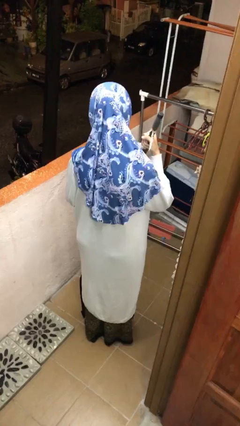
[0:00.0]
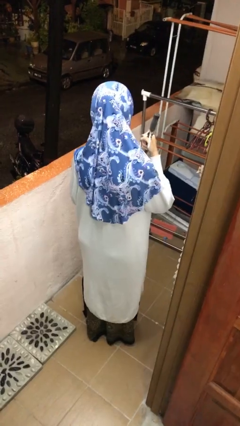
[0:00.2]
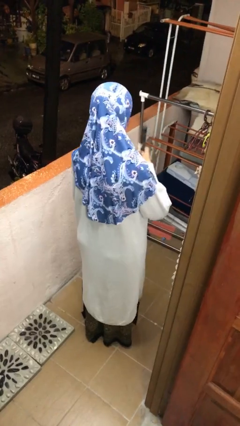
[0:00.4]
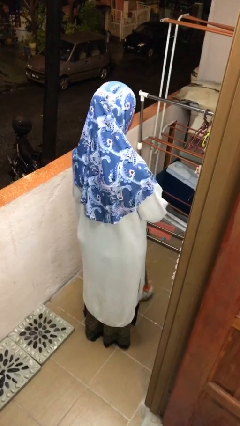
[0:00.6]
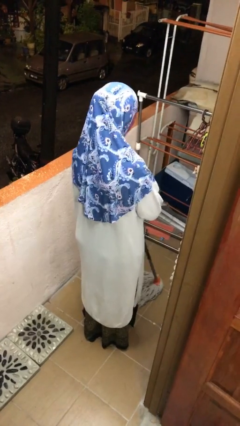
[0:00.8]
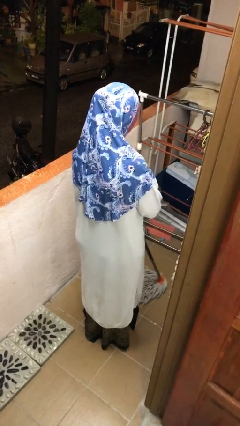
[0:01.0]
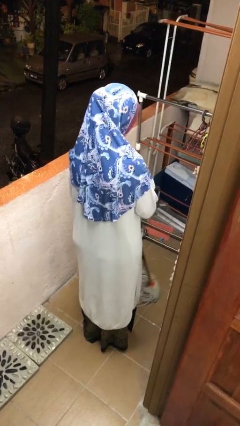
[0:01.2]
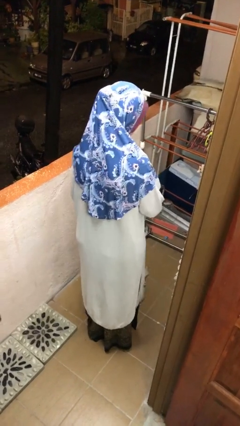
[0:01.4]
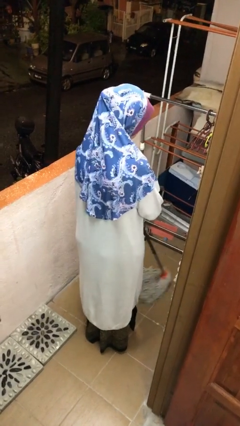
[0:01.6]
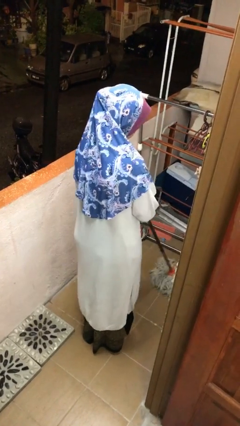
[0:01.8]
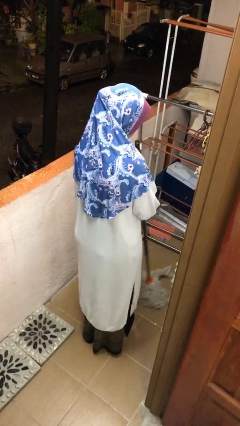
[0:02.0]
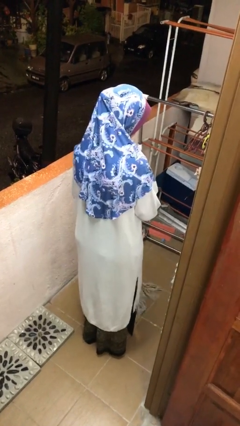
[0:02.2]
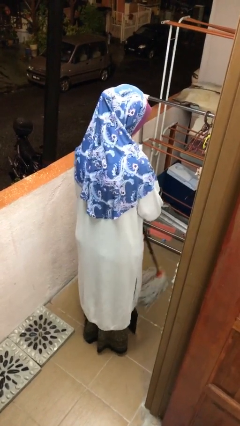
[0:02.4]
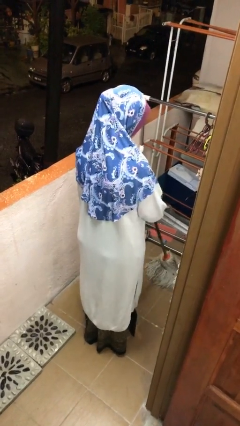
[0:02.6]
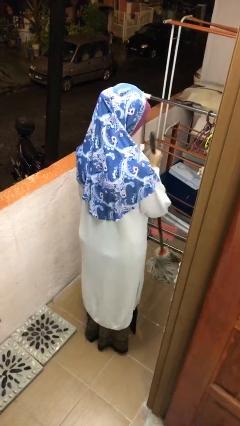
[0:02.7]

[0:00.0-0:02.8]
person mops

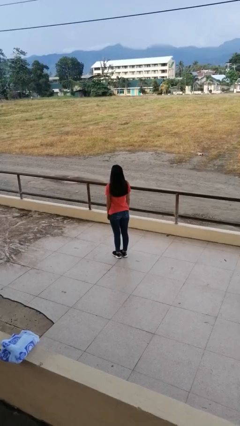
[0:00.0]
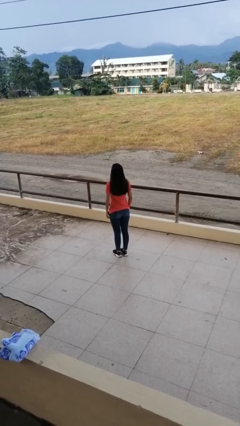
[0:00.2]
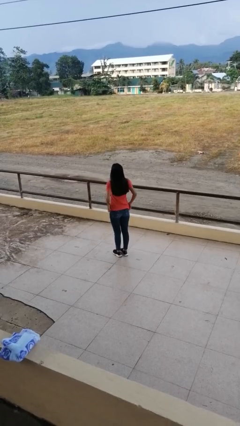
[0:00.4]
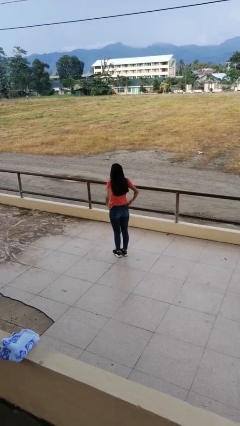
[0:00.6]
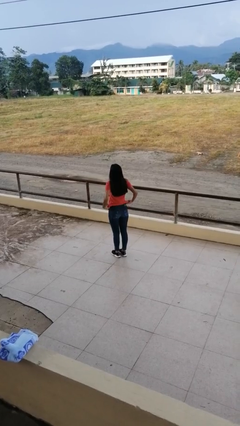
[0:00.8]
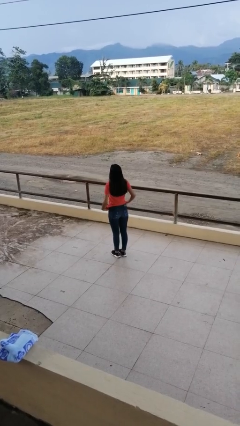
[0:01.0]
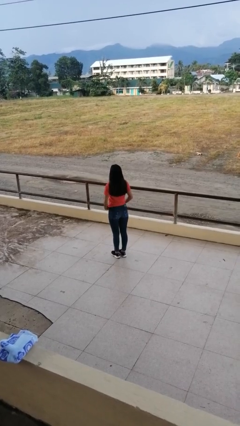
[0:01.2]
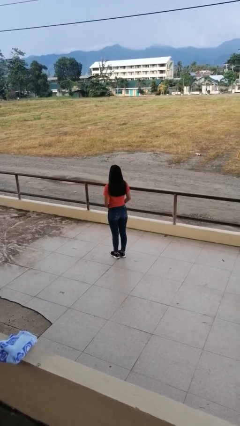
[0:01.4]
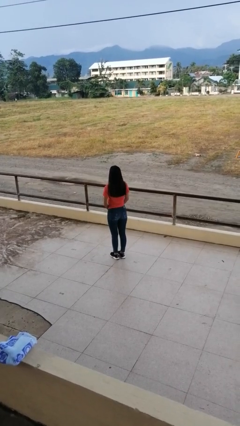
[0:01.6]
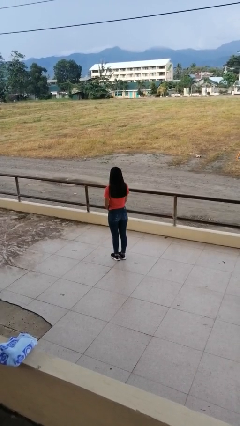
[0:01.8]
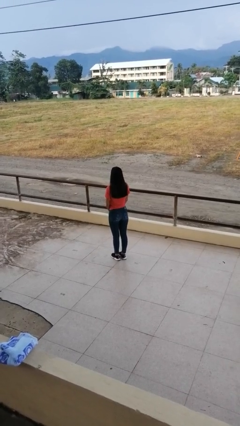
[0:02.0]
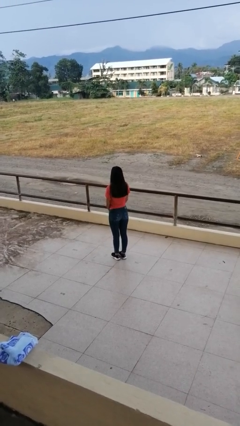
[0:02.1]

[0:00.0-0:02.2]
person tucks in shirt

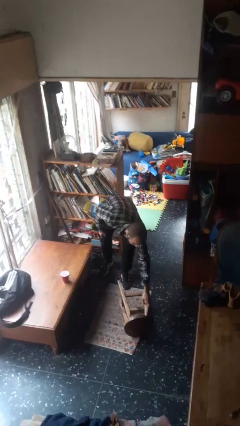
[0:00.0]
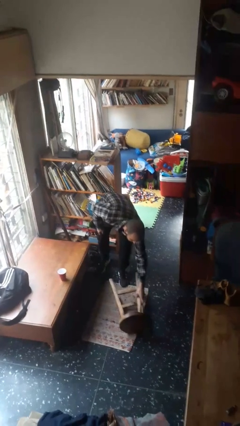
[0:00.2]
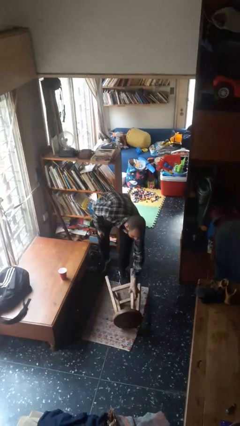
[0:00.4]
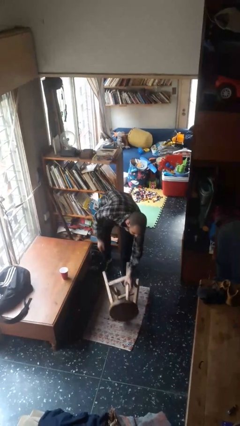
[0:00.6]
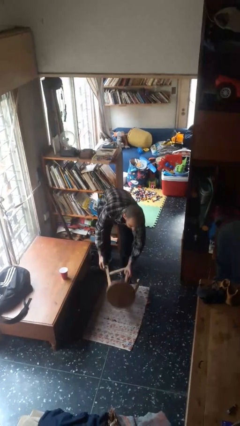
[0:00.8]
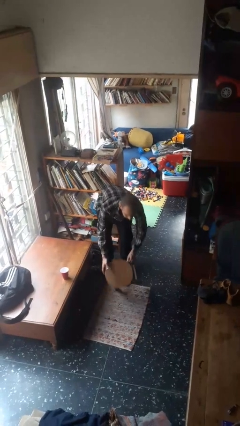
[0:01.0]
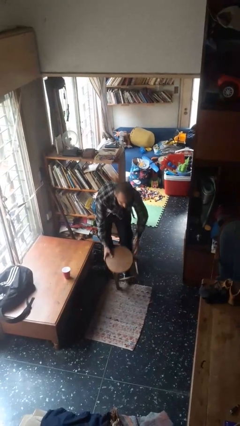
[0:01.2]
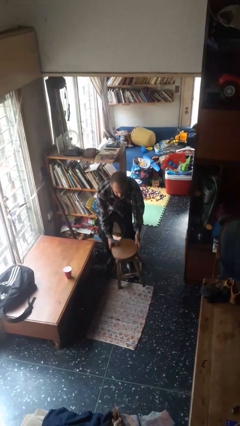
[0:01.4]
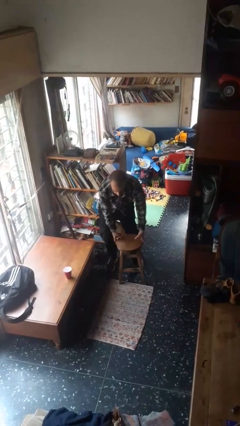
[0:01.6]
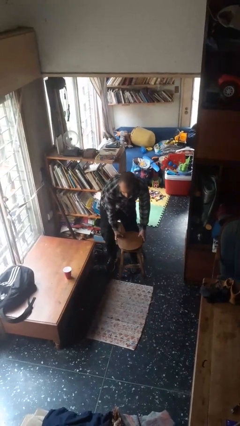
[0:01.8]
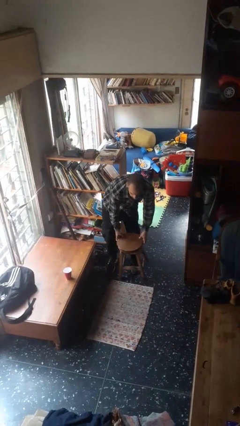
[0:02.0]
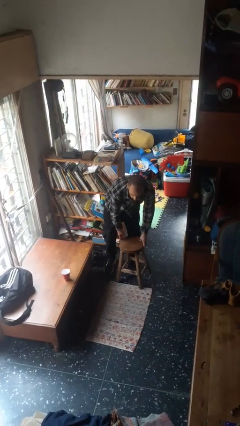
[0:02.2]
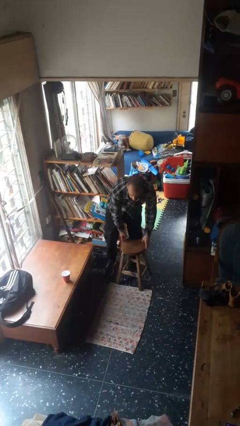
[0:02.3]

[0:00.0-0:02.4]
person sets upright furniture

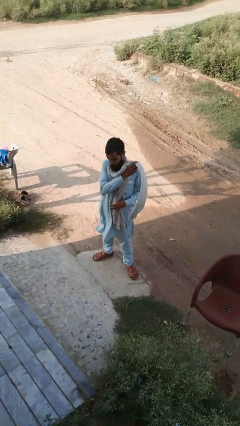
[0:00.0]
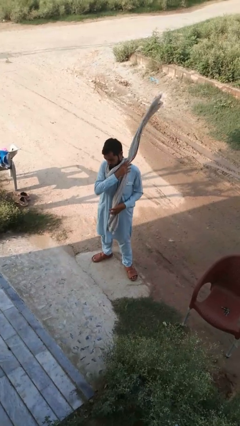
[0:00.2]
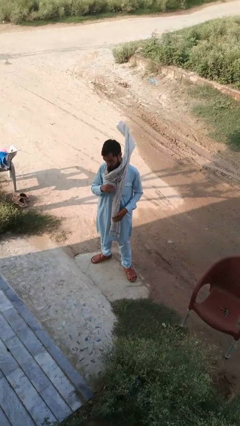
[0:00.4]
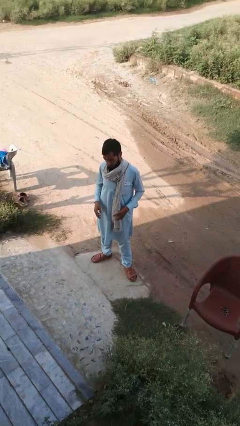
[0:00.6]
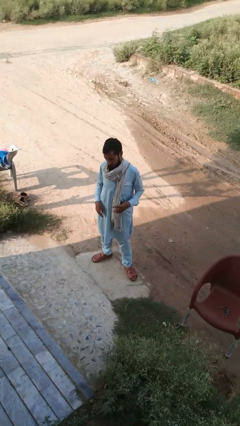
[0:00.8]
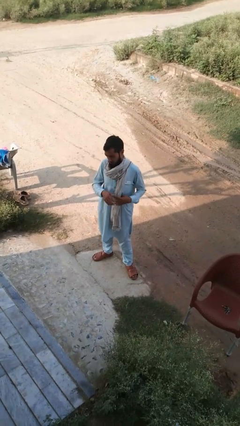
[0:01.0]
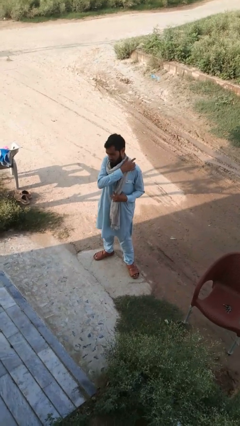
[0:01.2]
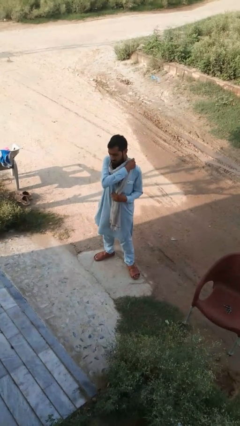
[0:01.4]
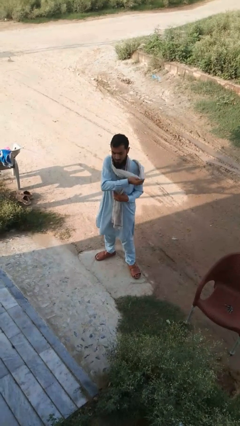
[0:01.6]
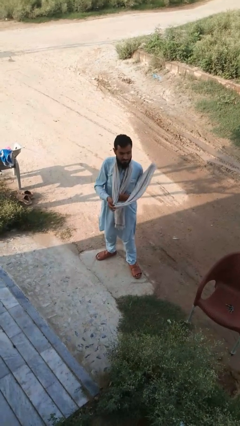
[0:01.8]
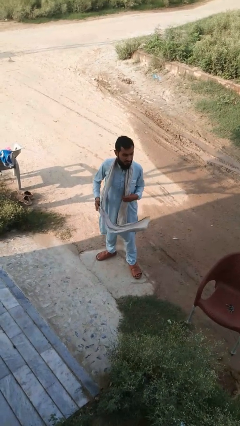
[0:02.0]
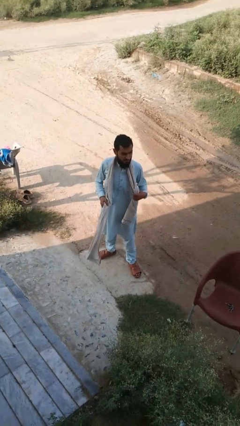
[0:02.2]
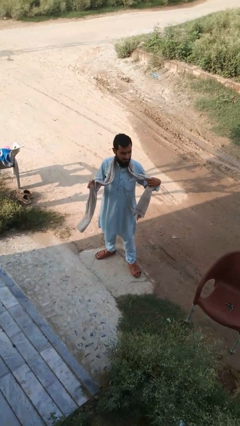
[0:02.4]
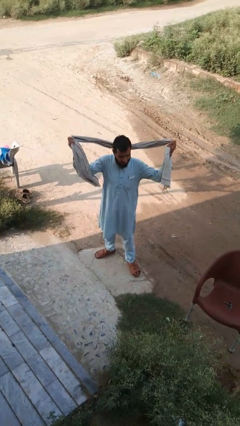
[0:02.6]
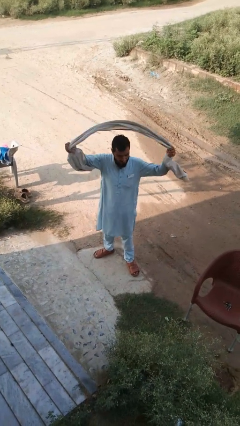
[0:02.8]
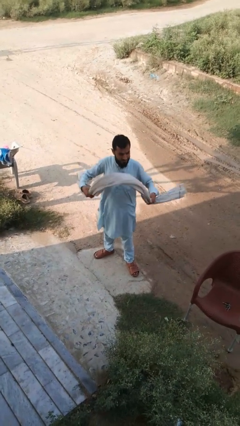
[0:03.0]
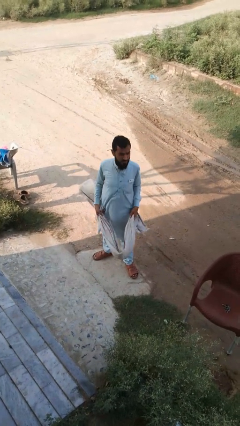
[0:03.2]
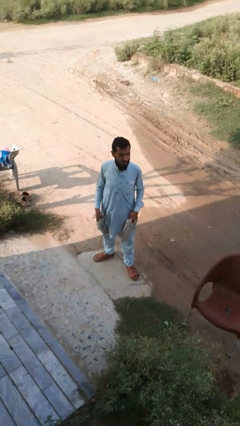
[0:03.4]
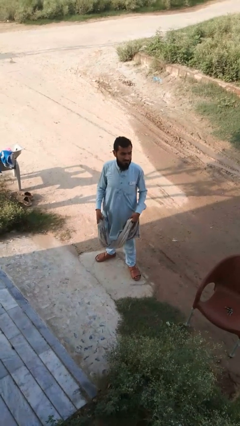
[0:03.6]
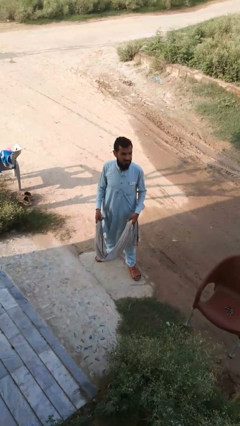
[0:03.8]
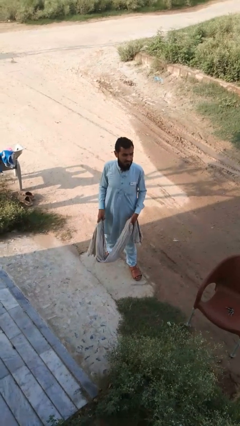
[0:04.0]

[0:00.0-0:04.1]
person takes off scarf

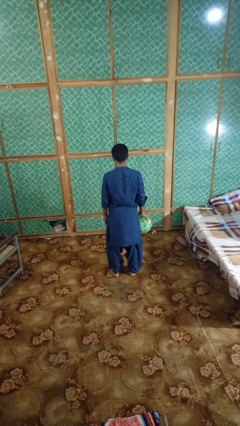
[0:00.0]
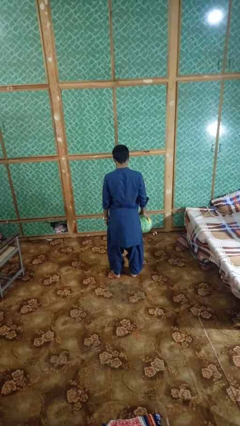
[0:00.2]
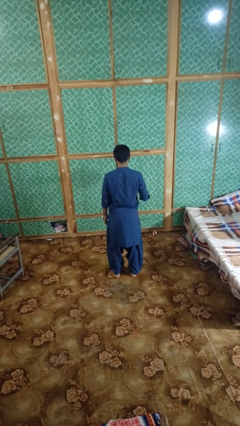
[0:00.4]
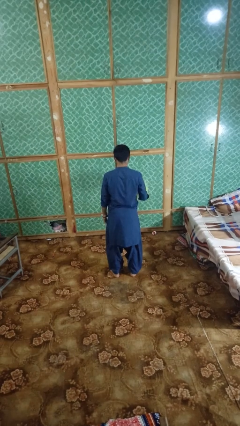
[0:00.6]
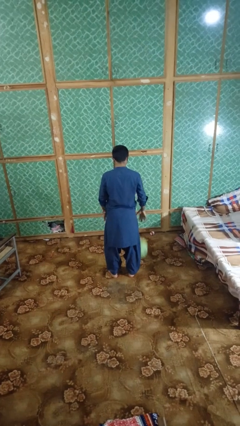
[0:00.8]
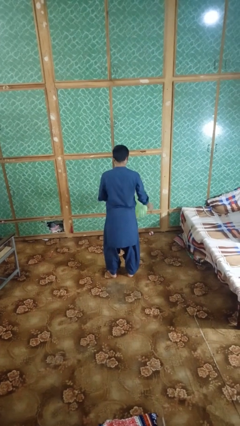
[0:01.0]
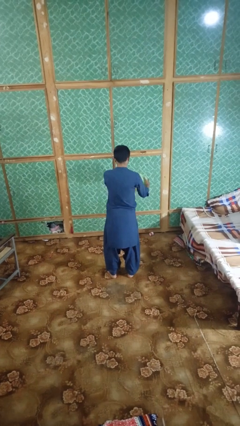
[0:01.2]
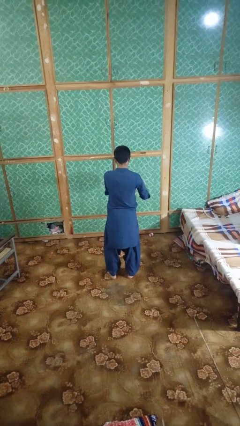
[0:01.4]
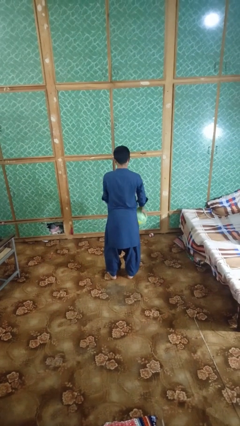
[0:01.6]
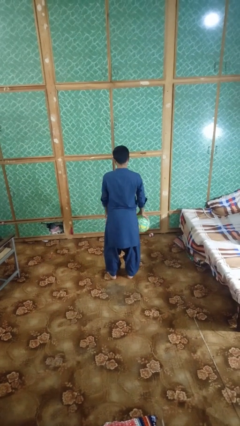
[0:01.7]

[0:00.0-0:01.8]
person bounces ball on floor

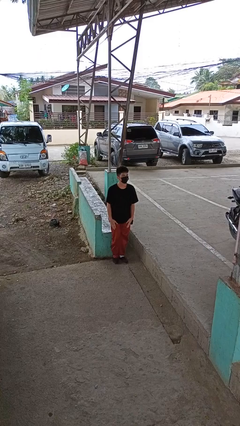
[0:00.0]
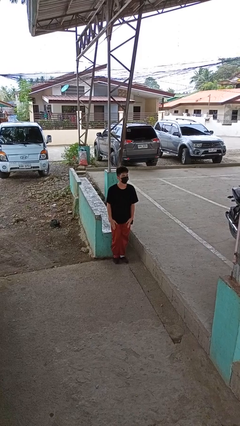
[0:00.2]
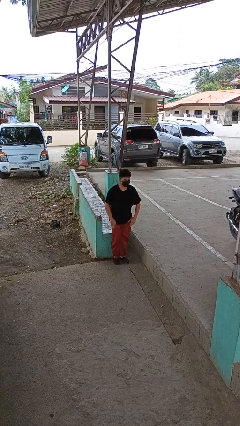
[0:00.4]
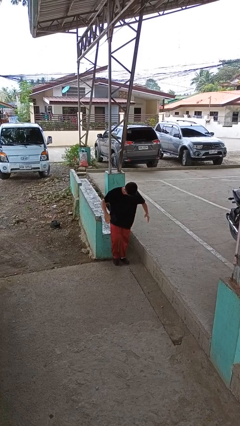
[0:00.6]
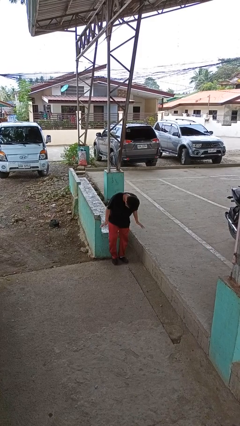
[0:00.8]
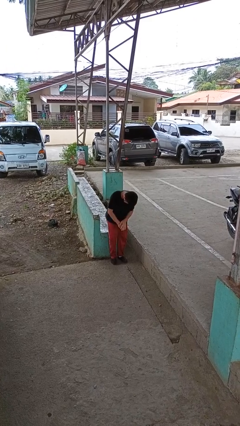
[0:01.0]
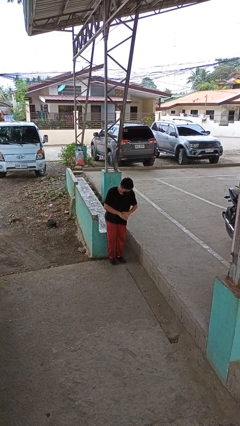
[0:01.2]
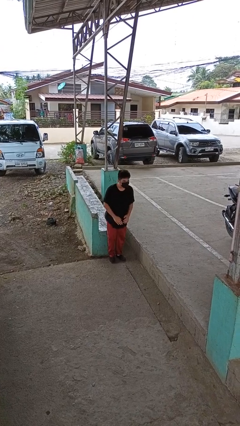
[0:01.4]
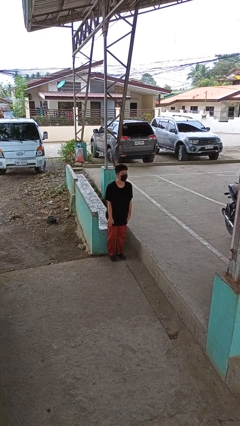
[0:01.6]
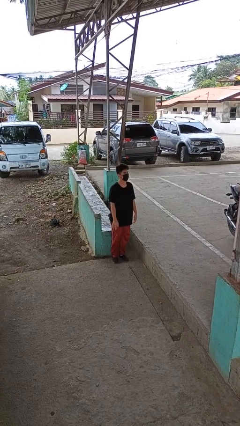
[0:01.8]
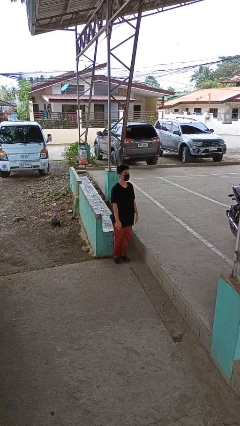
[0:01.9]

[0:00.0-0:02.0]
person slaps hands on thighs

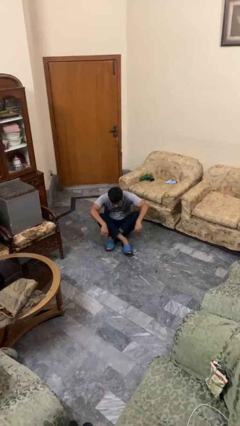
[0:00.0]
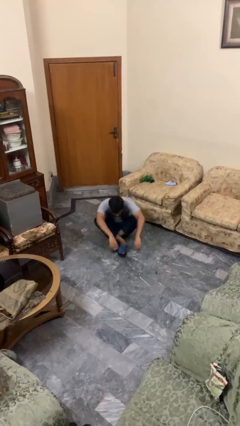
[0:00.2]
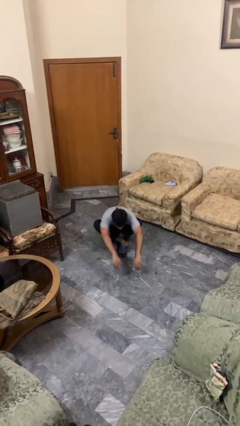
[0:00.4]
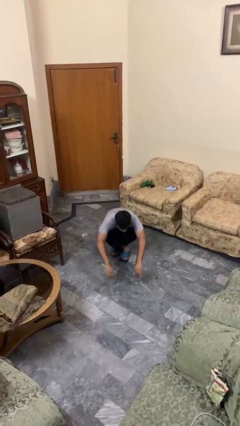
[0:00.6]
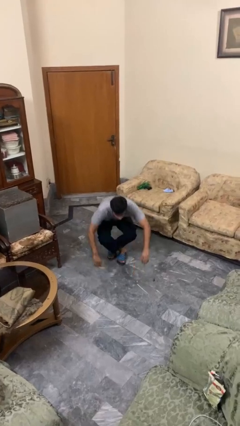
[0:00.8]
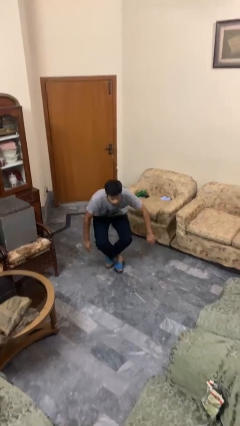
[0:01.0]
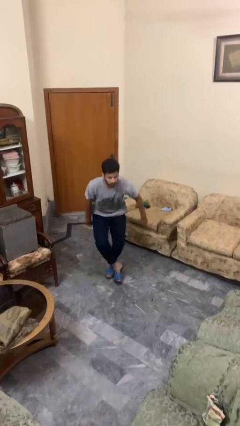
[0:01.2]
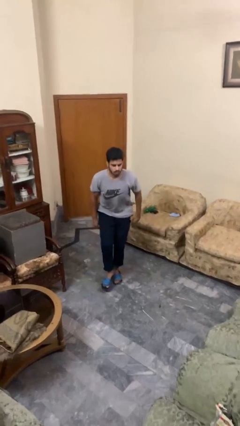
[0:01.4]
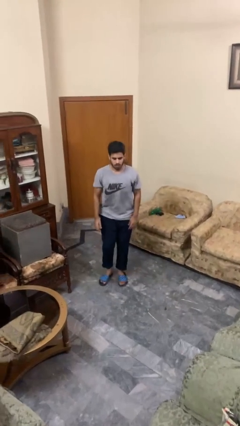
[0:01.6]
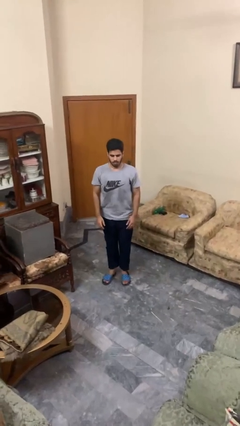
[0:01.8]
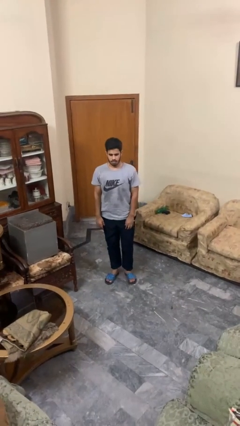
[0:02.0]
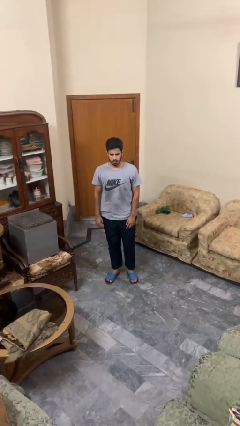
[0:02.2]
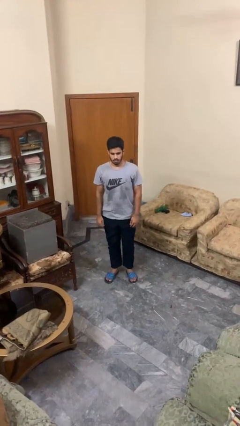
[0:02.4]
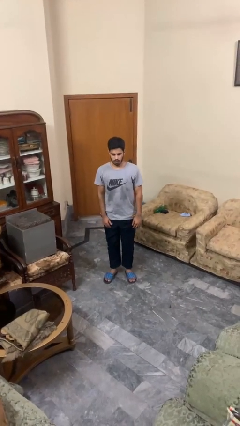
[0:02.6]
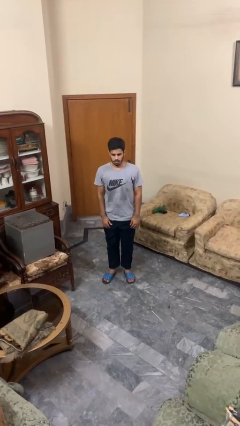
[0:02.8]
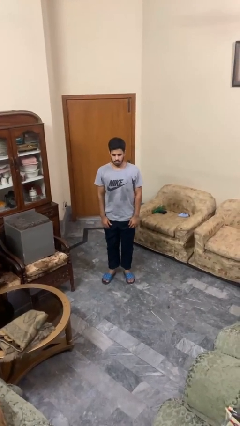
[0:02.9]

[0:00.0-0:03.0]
person stands up from floor
